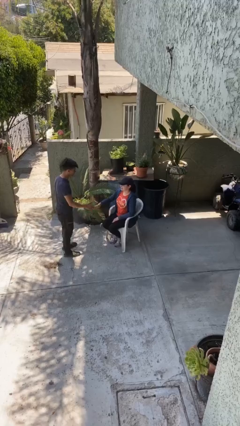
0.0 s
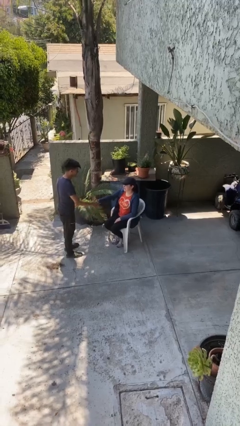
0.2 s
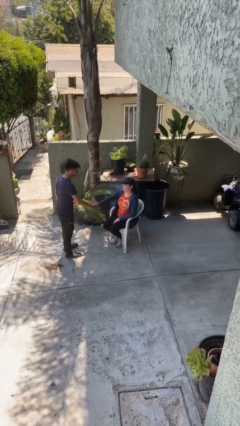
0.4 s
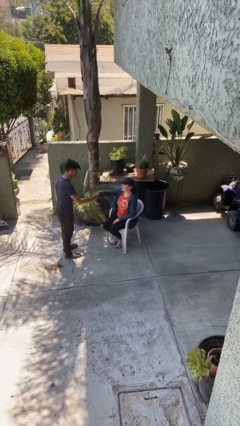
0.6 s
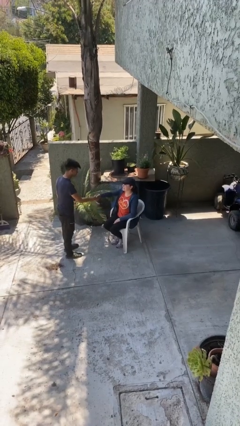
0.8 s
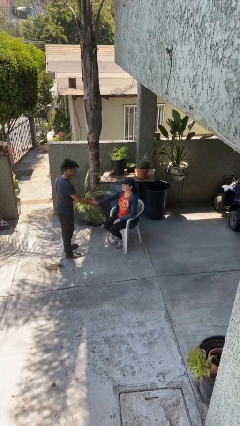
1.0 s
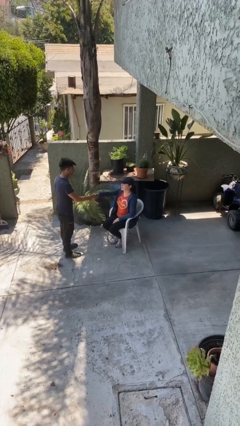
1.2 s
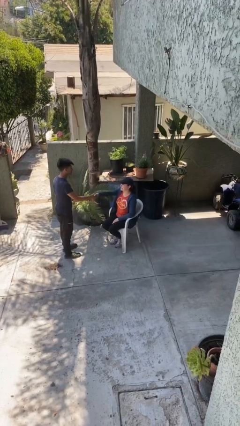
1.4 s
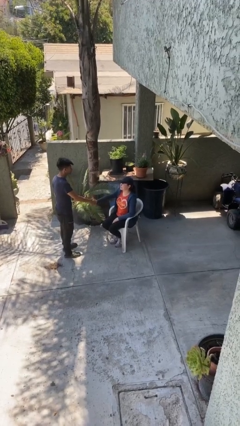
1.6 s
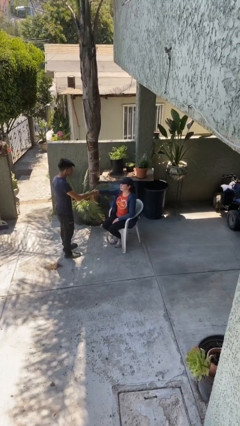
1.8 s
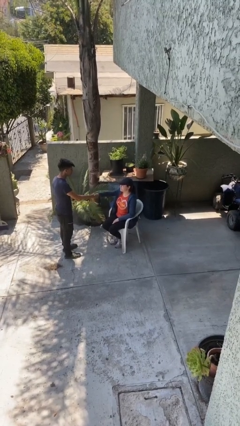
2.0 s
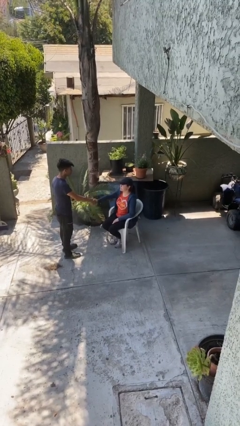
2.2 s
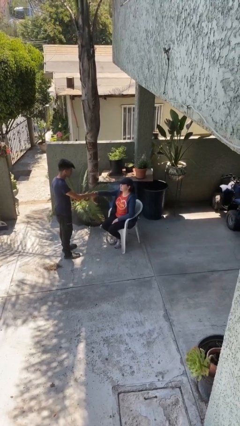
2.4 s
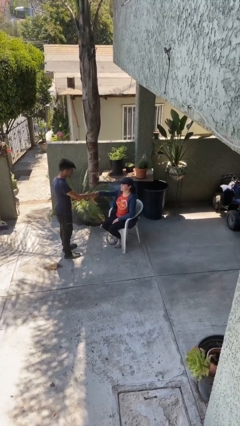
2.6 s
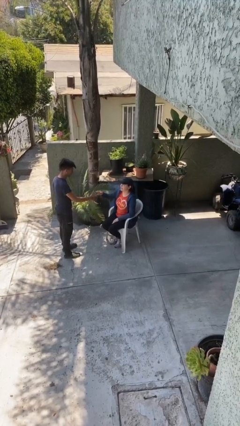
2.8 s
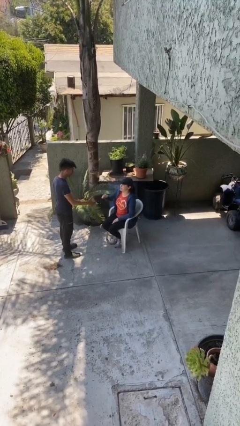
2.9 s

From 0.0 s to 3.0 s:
person shakes hand

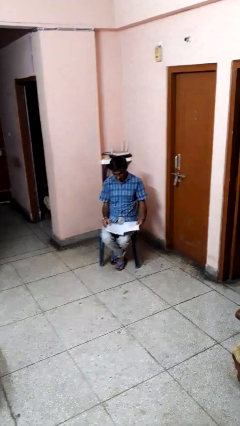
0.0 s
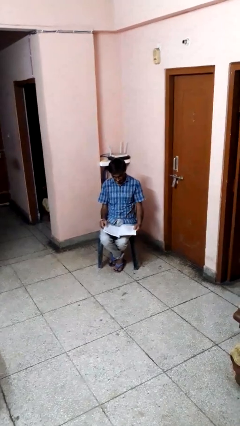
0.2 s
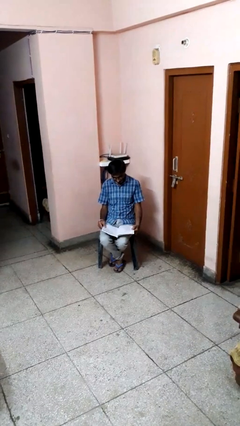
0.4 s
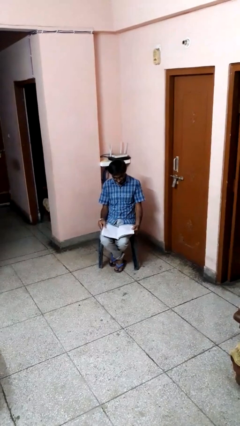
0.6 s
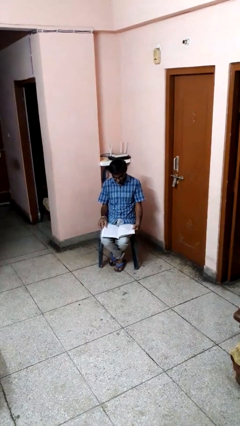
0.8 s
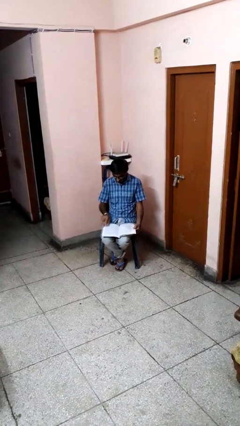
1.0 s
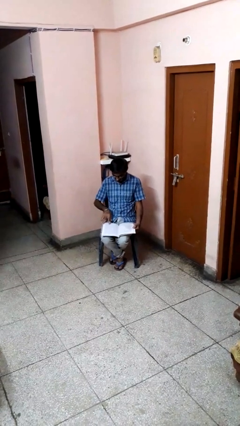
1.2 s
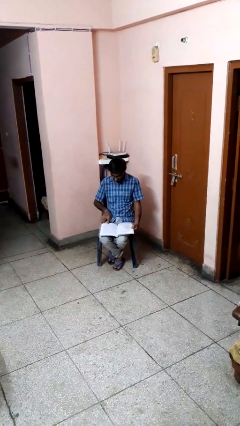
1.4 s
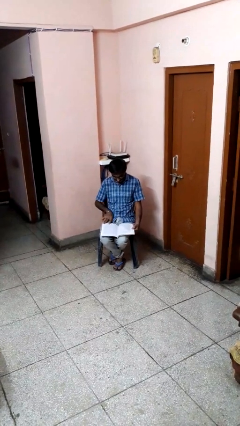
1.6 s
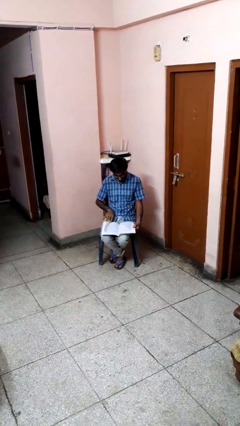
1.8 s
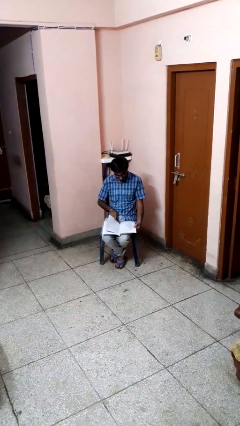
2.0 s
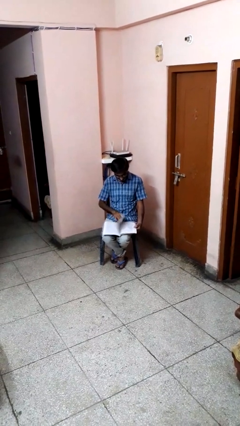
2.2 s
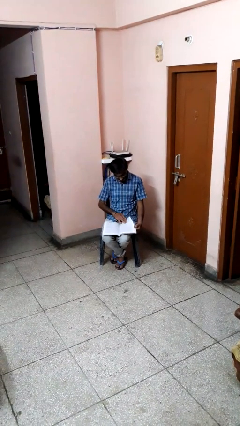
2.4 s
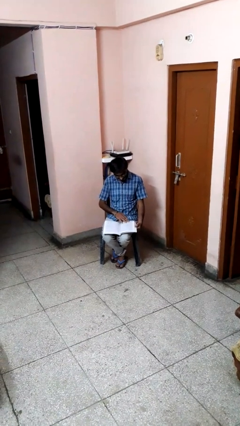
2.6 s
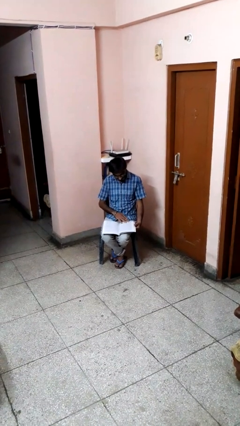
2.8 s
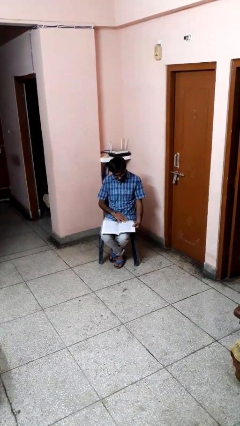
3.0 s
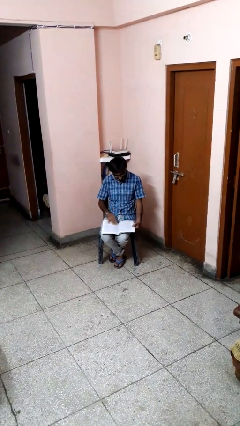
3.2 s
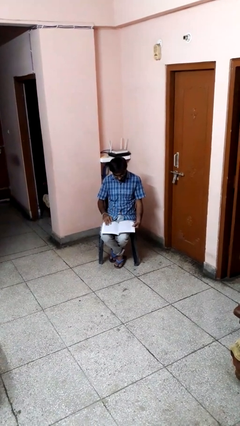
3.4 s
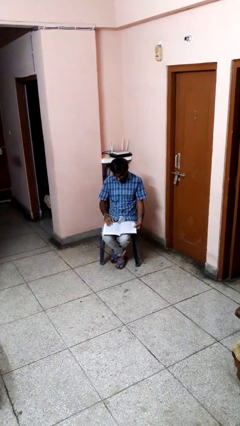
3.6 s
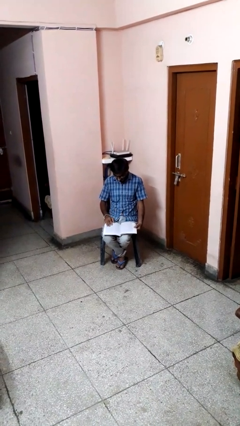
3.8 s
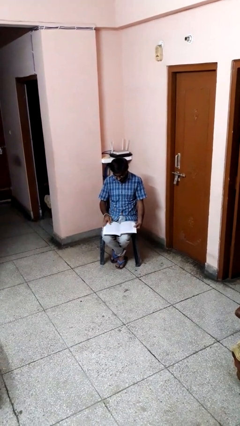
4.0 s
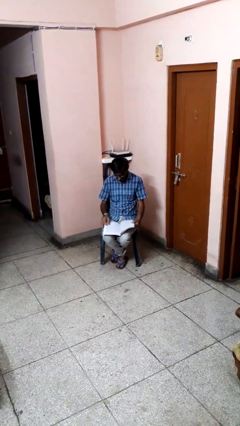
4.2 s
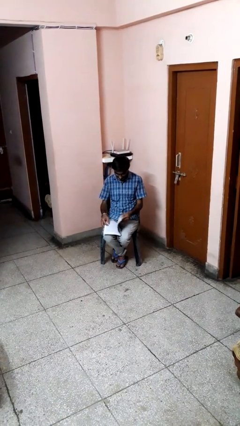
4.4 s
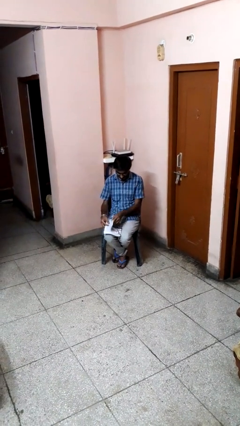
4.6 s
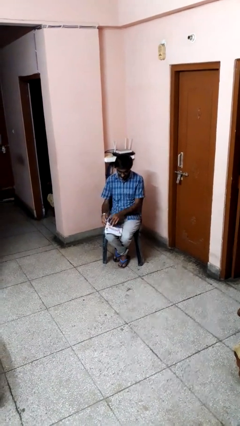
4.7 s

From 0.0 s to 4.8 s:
person reads book

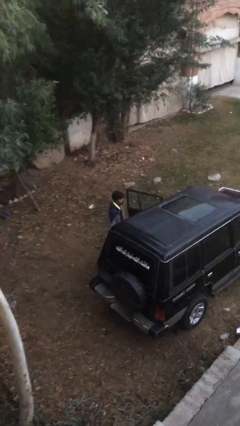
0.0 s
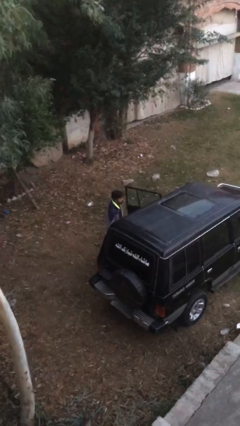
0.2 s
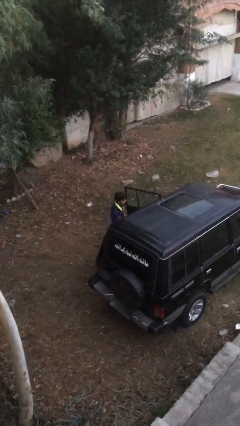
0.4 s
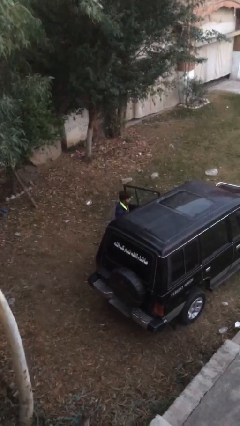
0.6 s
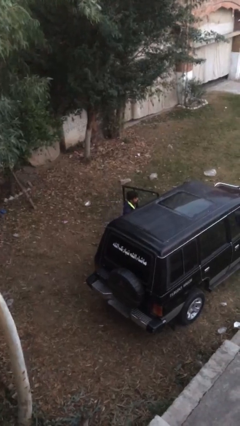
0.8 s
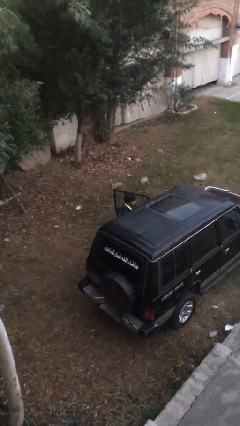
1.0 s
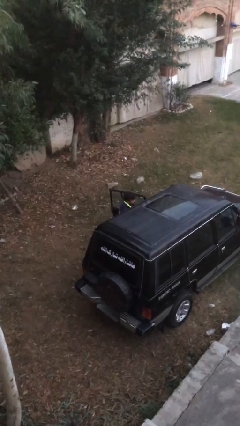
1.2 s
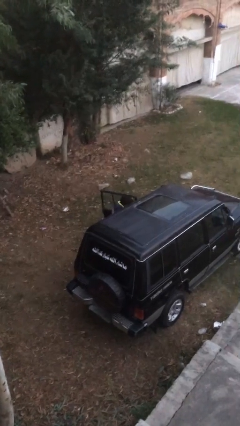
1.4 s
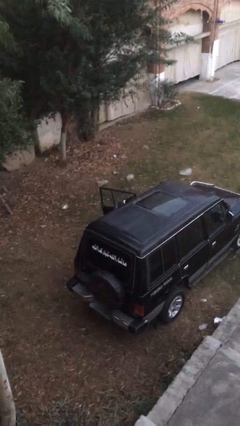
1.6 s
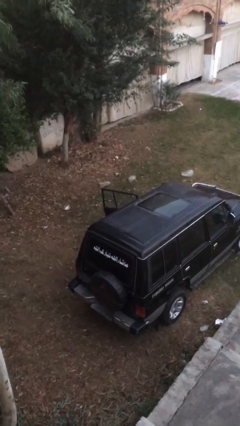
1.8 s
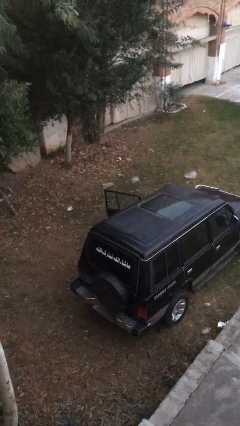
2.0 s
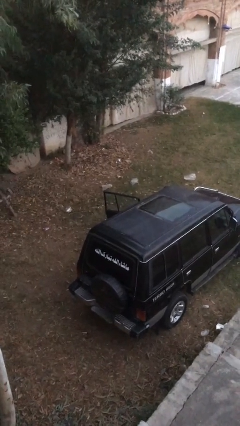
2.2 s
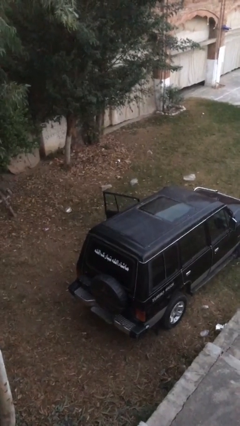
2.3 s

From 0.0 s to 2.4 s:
person enters car

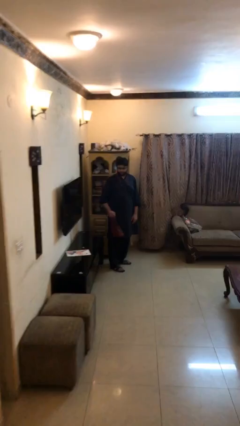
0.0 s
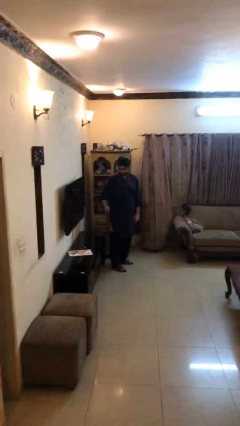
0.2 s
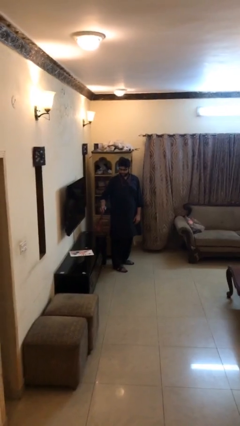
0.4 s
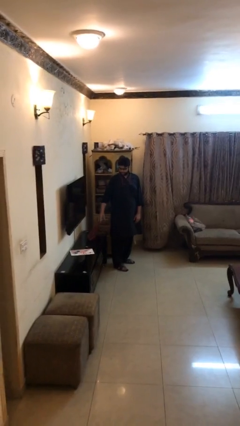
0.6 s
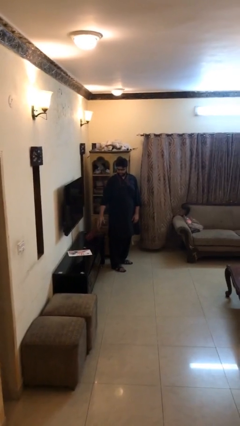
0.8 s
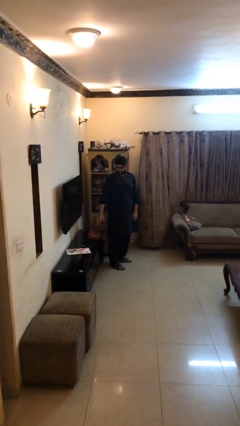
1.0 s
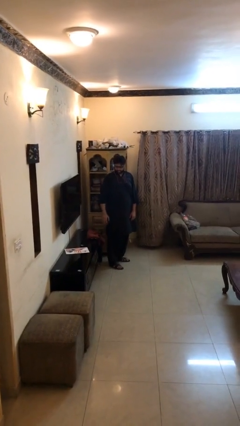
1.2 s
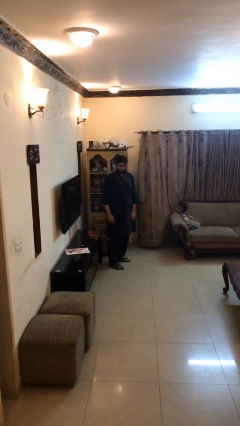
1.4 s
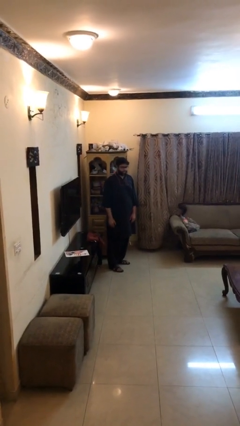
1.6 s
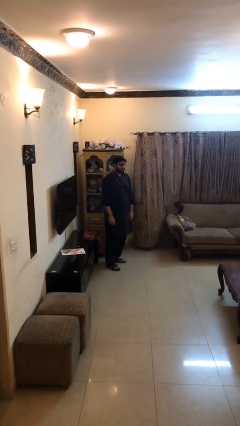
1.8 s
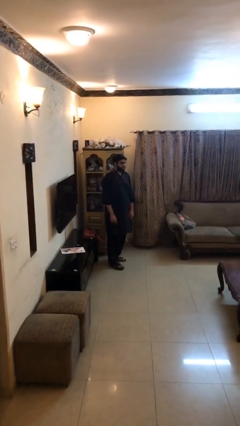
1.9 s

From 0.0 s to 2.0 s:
person puts down object on table

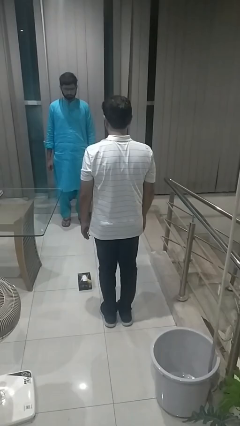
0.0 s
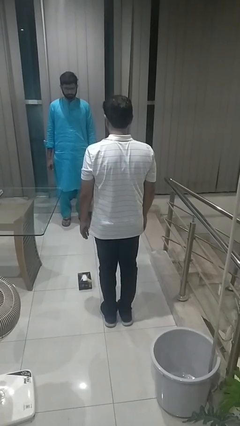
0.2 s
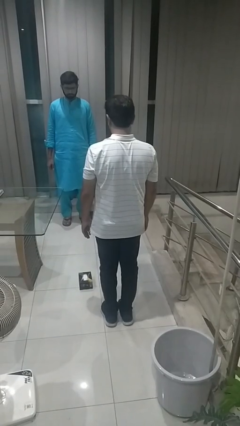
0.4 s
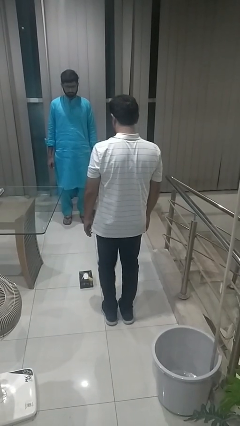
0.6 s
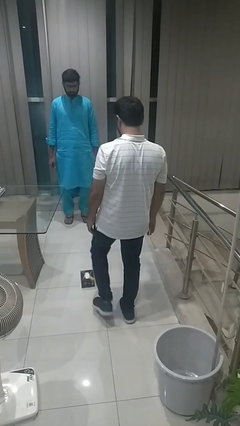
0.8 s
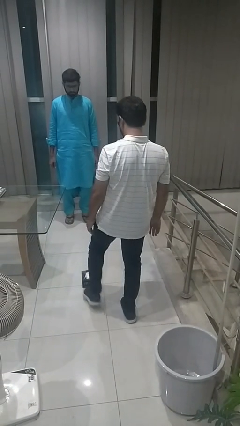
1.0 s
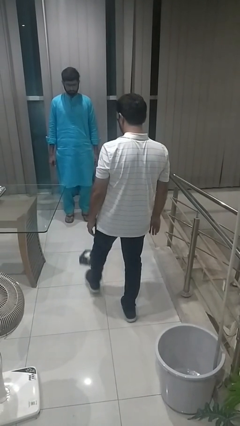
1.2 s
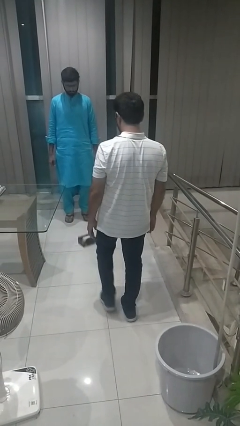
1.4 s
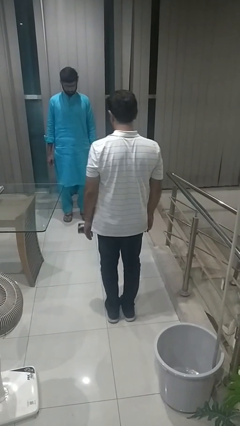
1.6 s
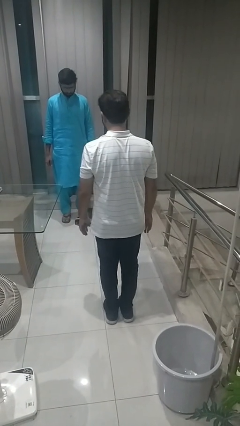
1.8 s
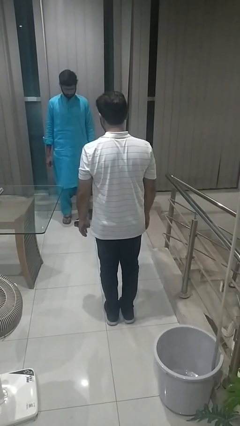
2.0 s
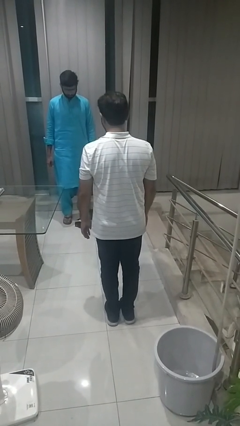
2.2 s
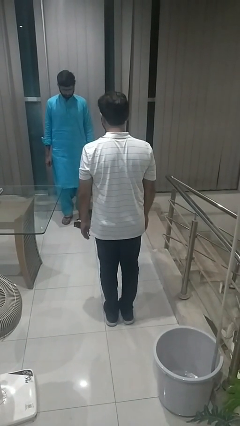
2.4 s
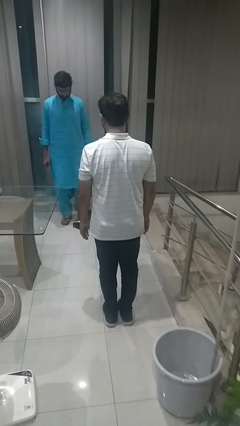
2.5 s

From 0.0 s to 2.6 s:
person kicks object to person

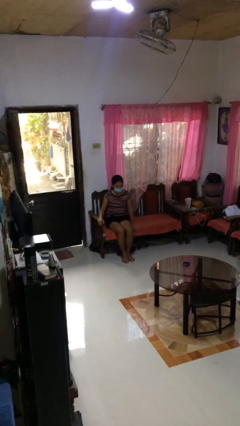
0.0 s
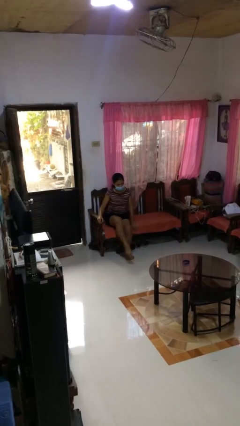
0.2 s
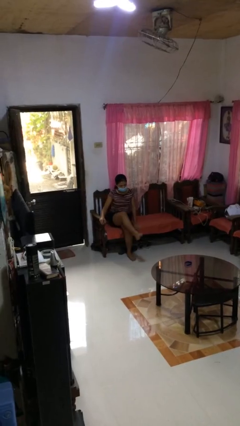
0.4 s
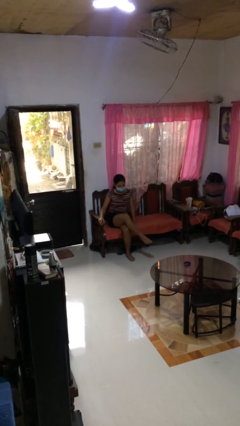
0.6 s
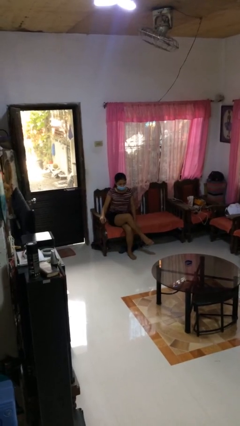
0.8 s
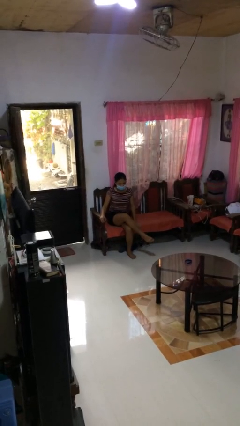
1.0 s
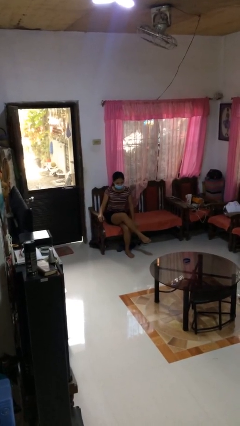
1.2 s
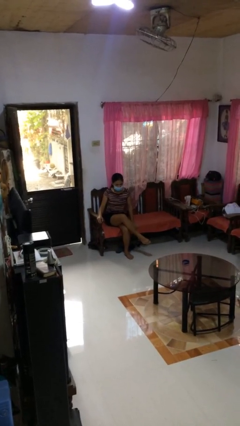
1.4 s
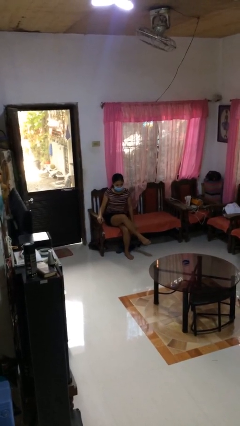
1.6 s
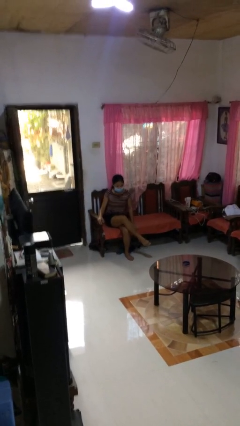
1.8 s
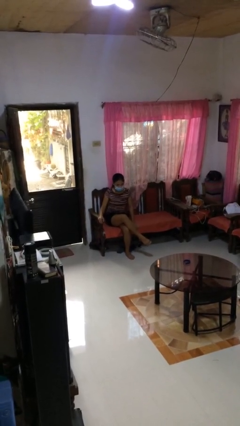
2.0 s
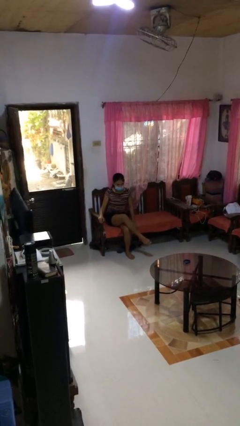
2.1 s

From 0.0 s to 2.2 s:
person crosses legs

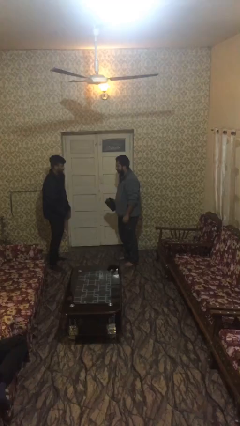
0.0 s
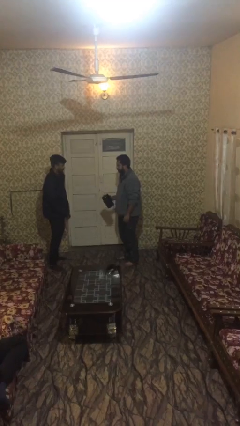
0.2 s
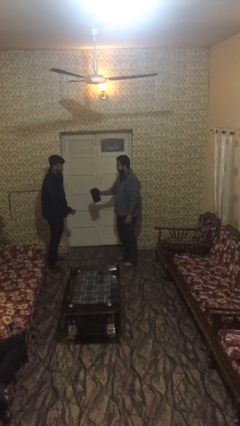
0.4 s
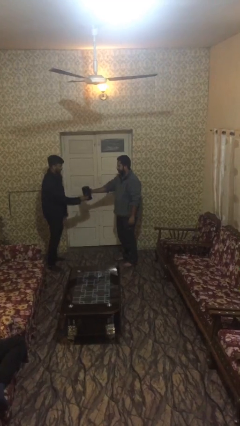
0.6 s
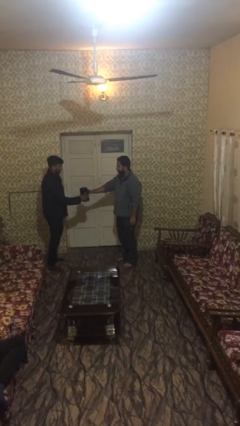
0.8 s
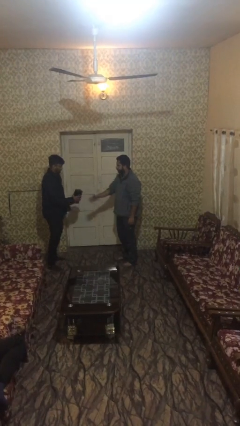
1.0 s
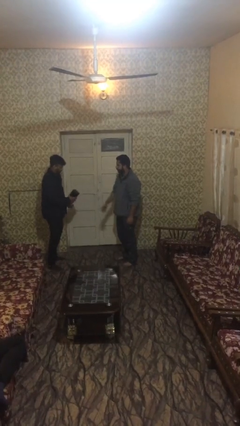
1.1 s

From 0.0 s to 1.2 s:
person transfers object to person
